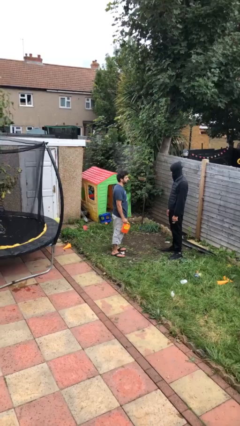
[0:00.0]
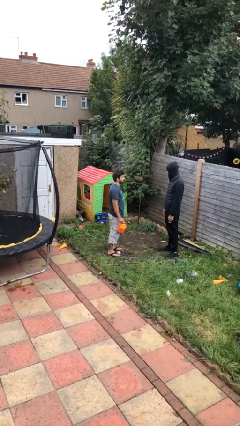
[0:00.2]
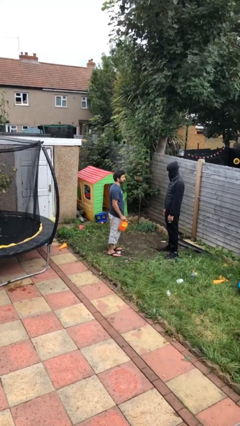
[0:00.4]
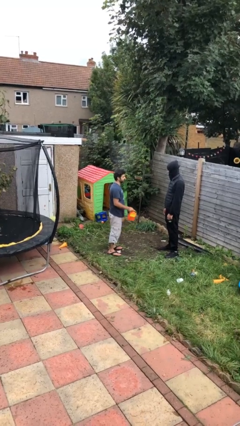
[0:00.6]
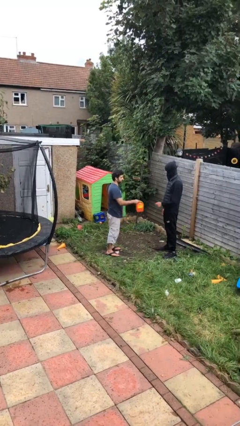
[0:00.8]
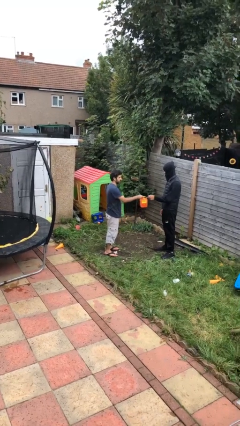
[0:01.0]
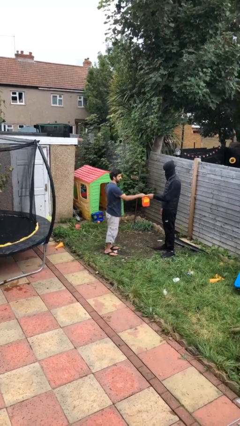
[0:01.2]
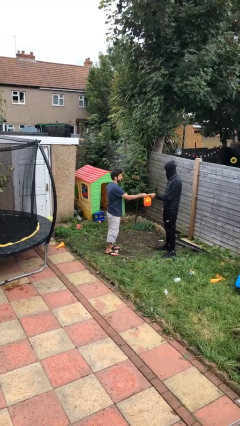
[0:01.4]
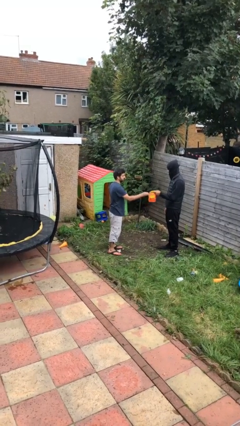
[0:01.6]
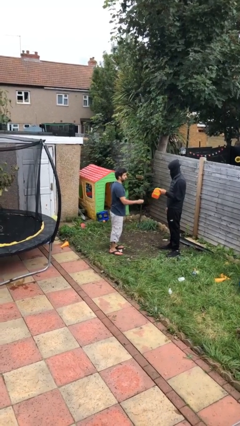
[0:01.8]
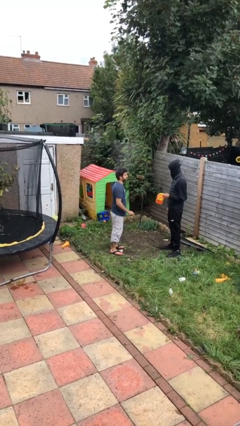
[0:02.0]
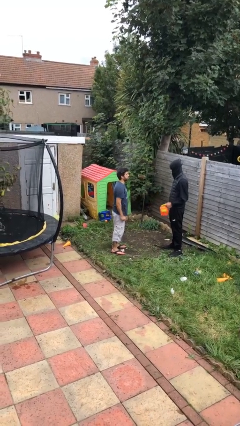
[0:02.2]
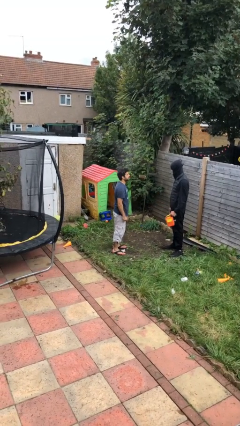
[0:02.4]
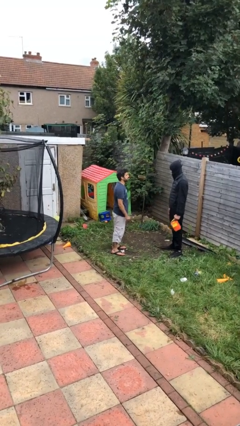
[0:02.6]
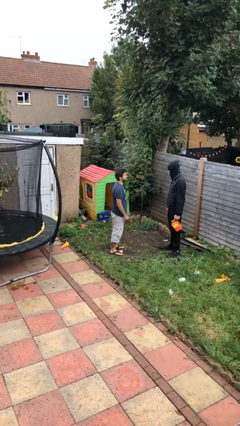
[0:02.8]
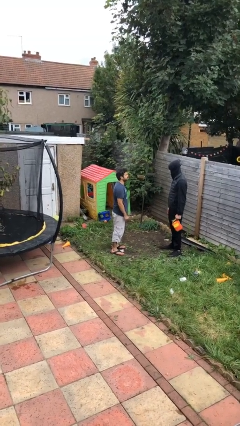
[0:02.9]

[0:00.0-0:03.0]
person transfers object to person

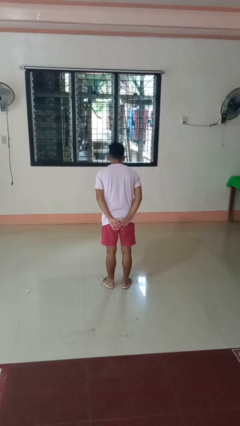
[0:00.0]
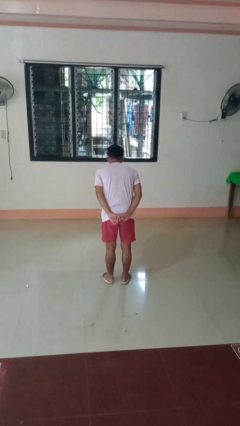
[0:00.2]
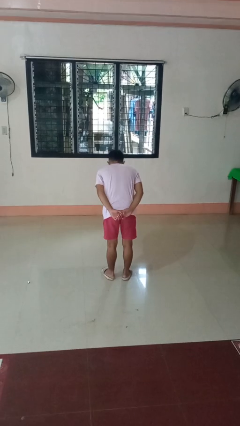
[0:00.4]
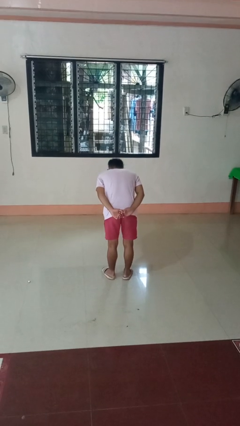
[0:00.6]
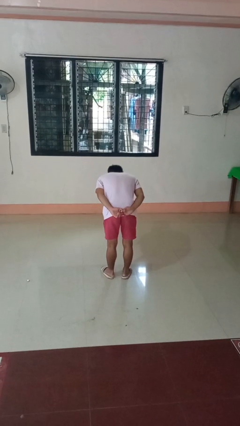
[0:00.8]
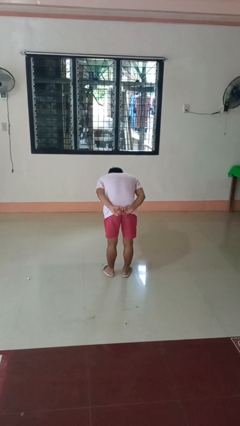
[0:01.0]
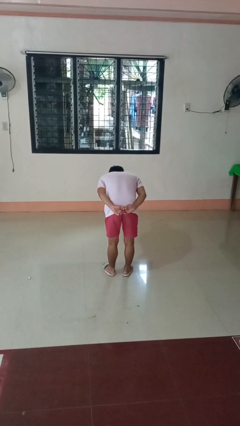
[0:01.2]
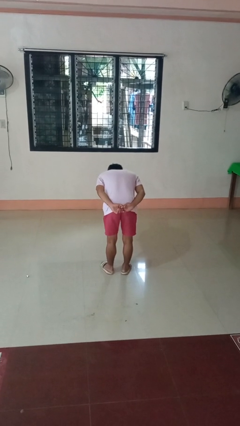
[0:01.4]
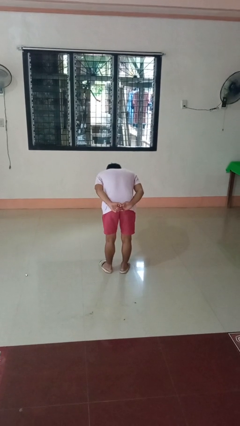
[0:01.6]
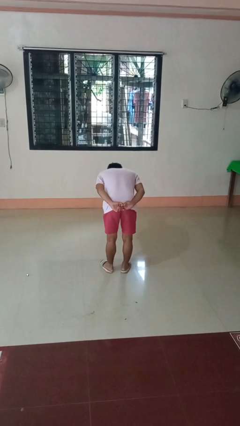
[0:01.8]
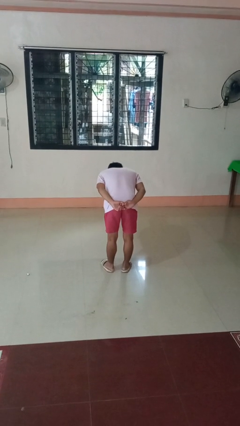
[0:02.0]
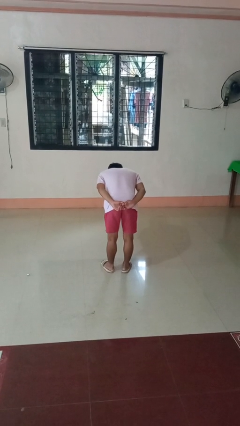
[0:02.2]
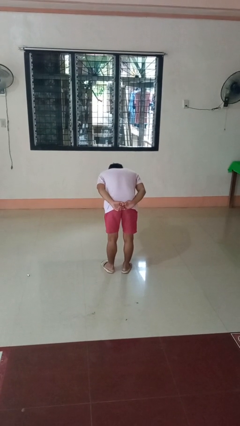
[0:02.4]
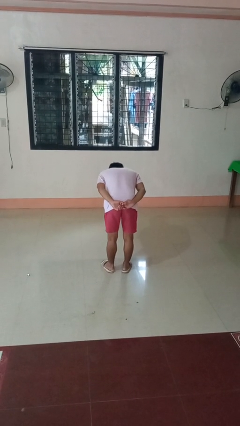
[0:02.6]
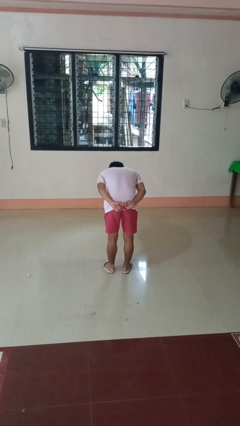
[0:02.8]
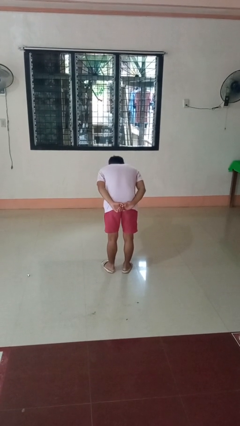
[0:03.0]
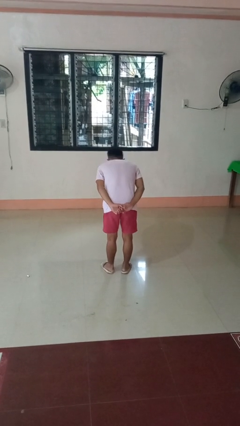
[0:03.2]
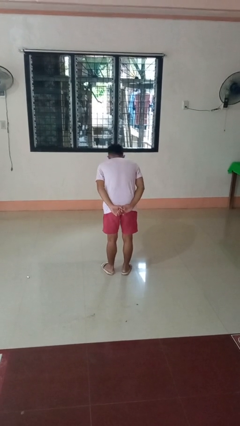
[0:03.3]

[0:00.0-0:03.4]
person bows

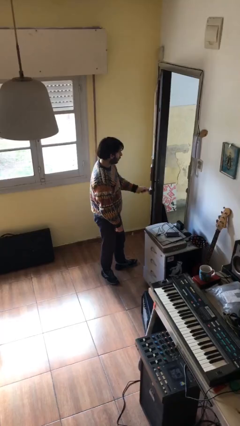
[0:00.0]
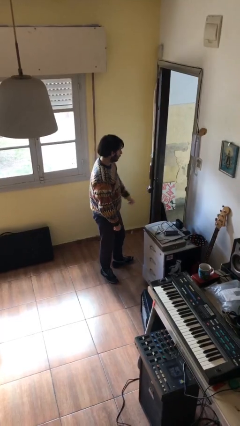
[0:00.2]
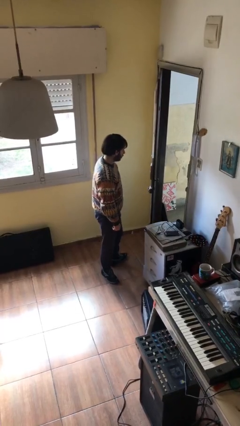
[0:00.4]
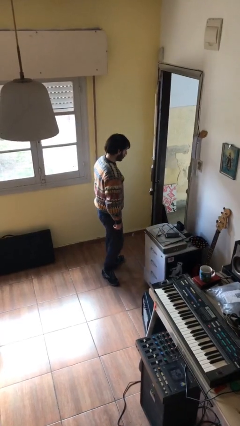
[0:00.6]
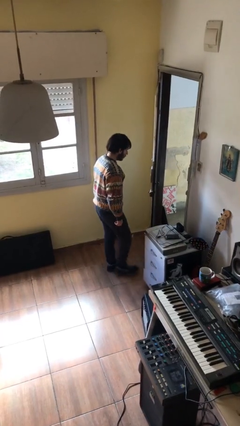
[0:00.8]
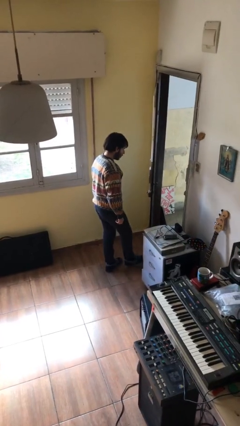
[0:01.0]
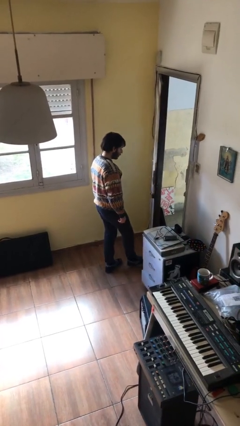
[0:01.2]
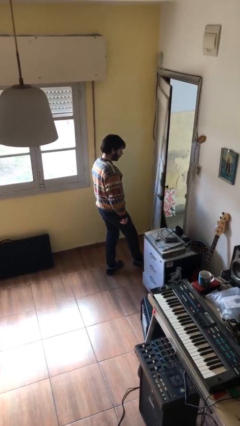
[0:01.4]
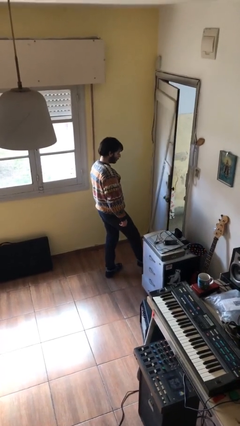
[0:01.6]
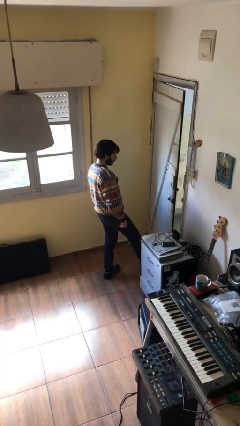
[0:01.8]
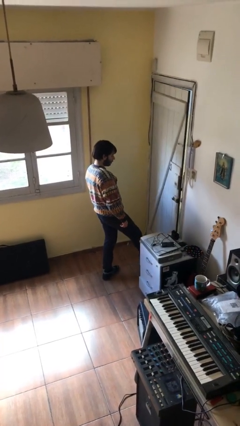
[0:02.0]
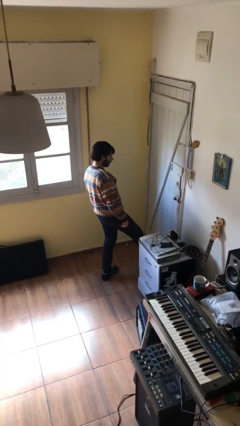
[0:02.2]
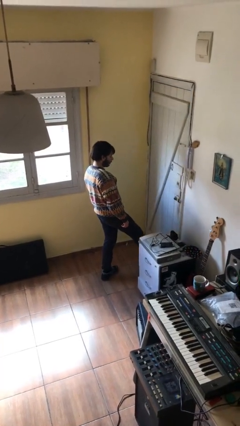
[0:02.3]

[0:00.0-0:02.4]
person closes door with foot

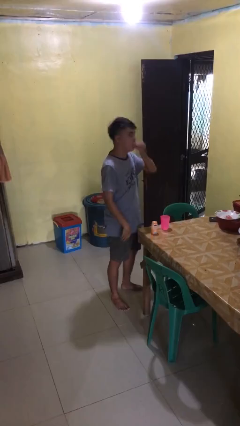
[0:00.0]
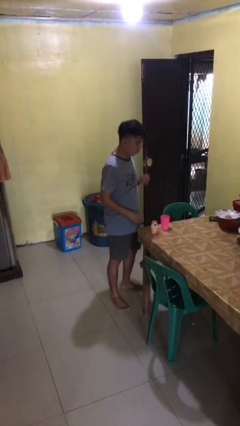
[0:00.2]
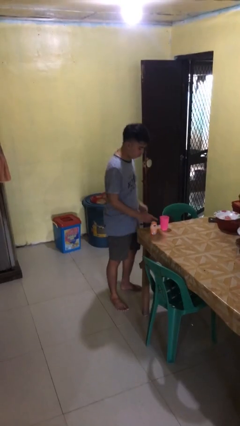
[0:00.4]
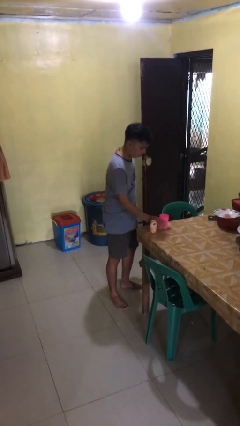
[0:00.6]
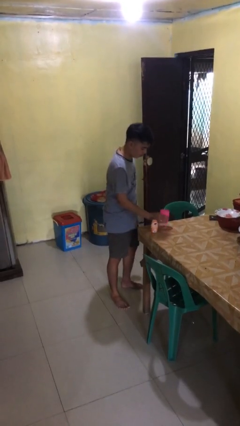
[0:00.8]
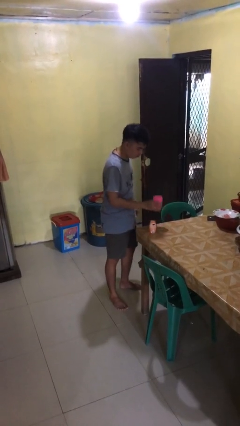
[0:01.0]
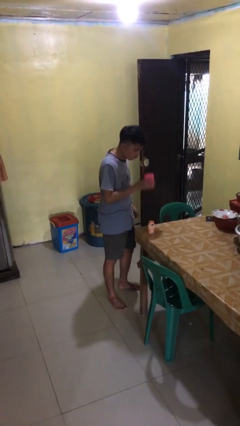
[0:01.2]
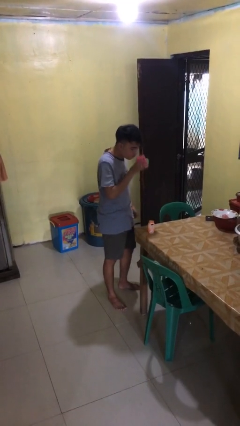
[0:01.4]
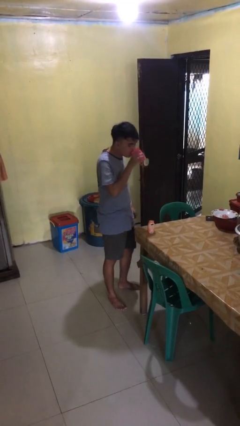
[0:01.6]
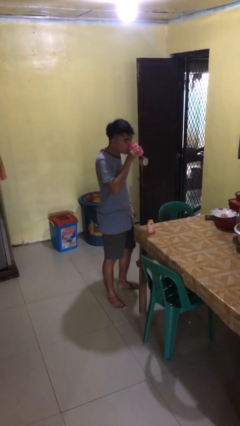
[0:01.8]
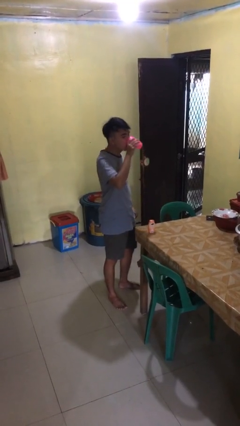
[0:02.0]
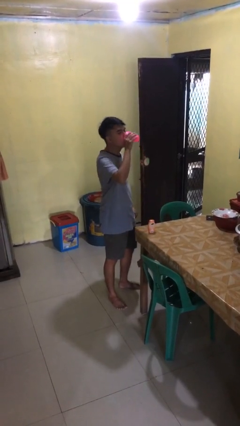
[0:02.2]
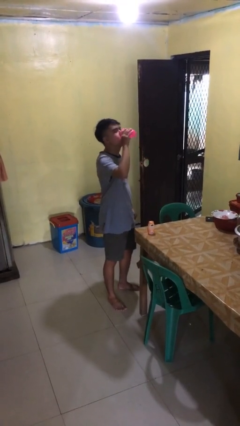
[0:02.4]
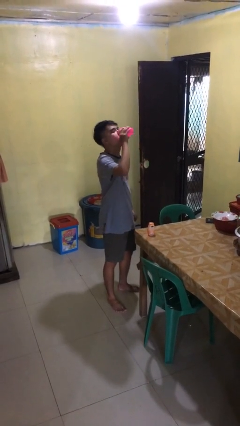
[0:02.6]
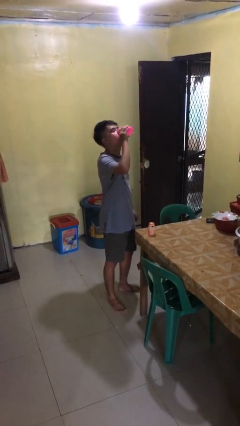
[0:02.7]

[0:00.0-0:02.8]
person drinks from cup

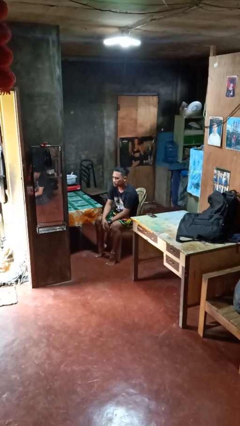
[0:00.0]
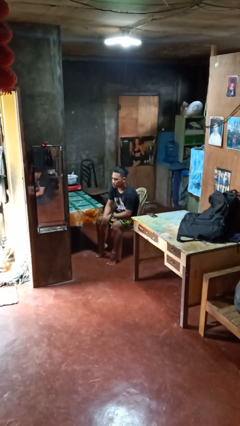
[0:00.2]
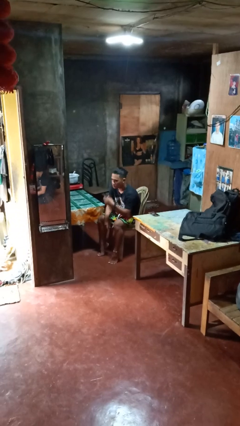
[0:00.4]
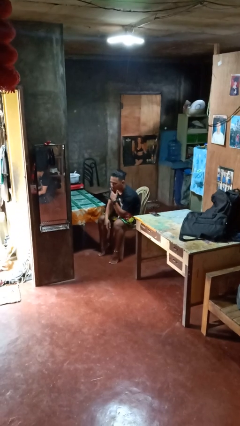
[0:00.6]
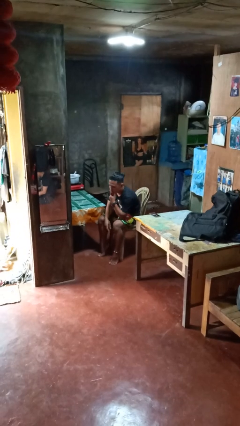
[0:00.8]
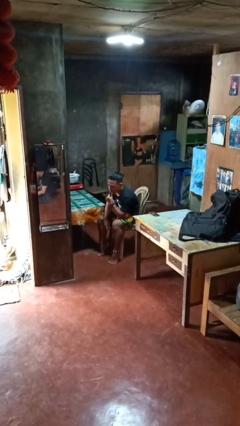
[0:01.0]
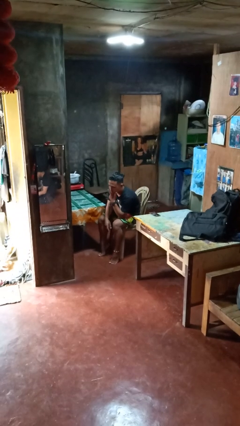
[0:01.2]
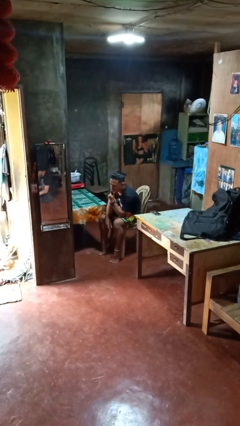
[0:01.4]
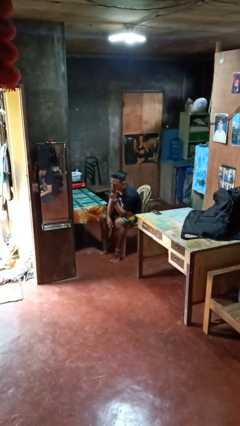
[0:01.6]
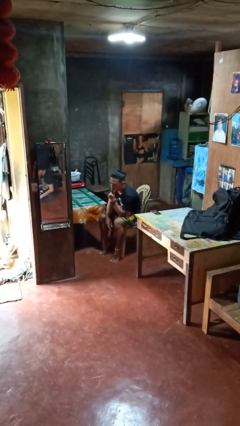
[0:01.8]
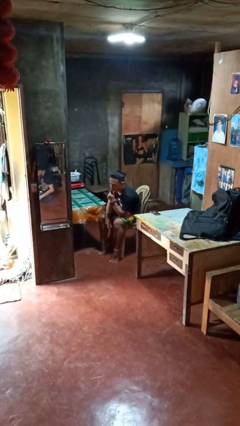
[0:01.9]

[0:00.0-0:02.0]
person strokes chin

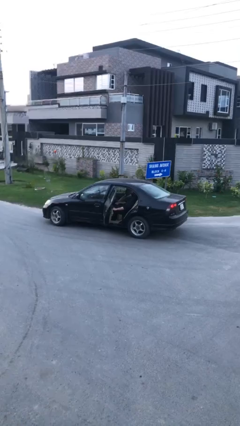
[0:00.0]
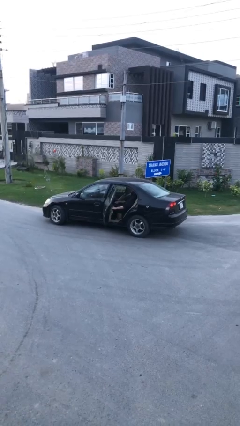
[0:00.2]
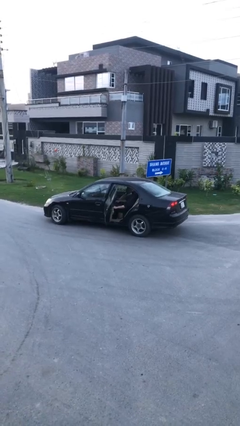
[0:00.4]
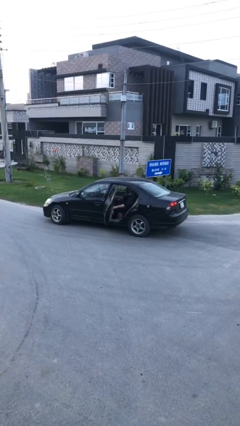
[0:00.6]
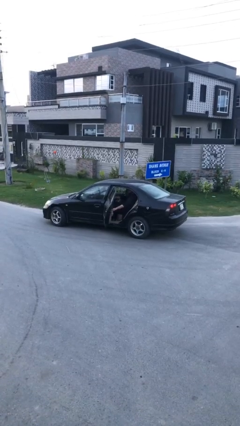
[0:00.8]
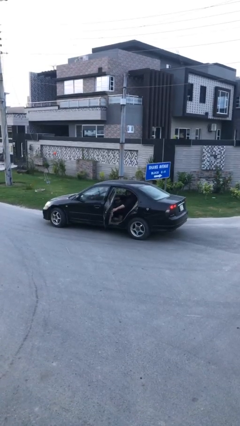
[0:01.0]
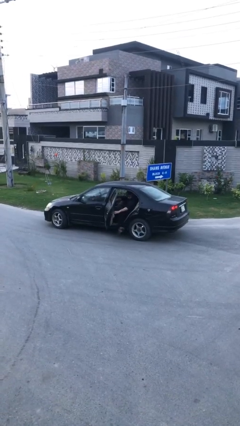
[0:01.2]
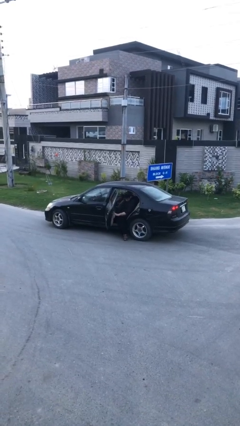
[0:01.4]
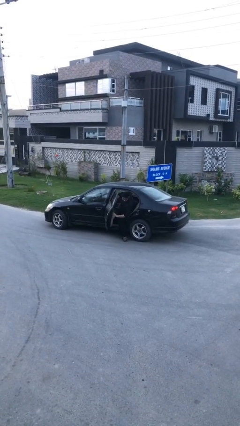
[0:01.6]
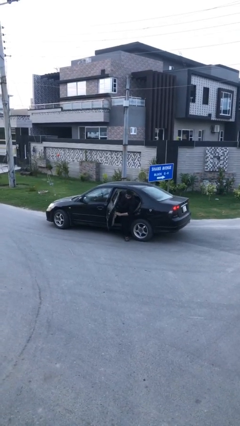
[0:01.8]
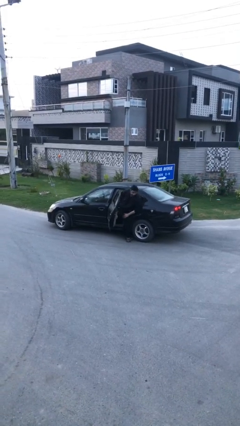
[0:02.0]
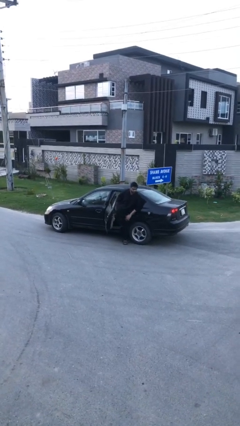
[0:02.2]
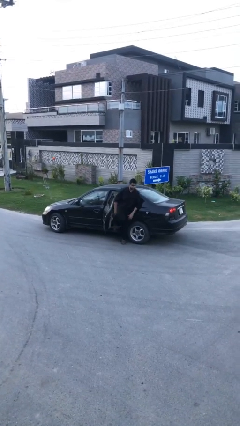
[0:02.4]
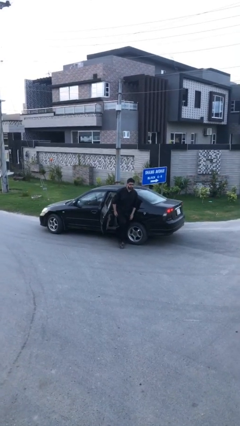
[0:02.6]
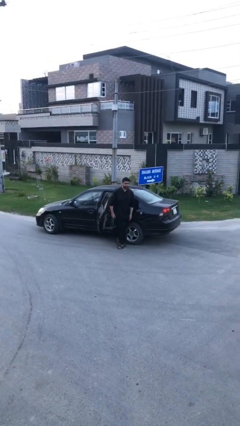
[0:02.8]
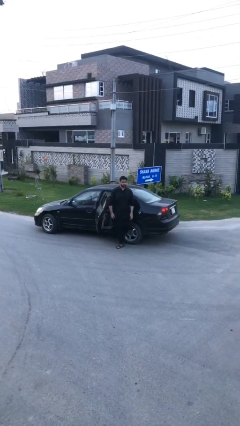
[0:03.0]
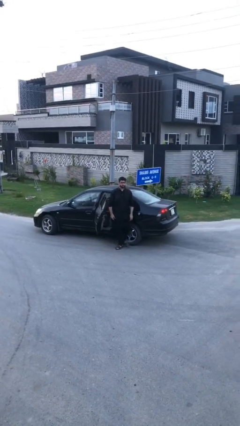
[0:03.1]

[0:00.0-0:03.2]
person exits car
